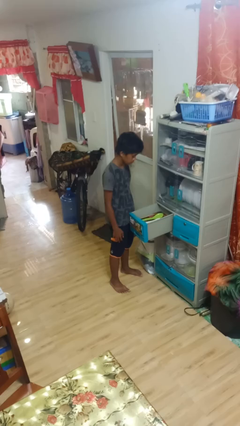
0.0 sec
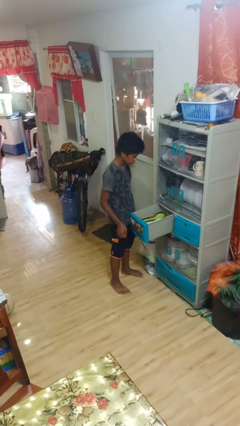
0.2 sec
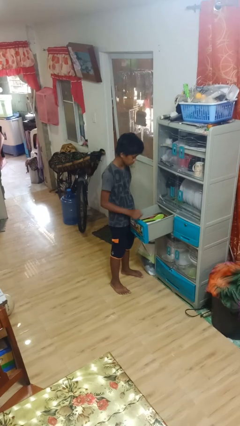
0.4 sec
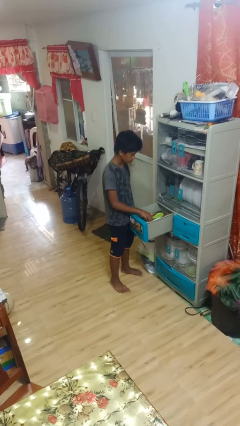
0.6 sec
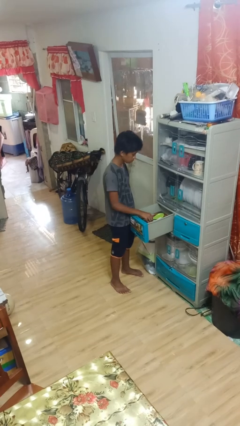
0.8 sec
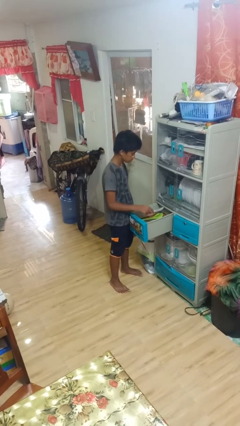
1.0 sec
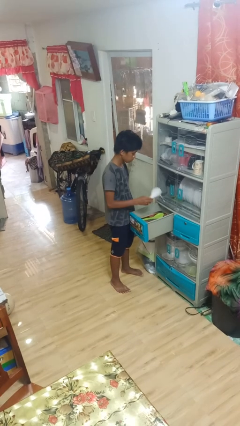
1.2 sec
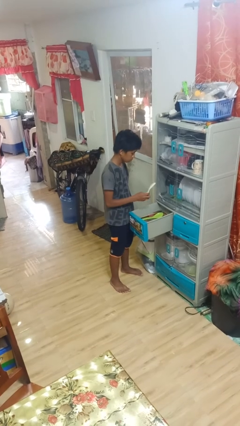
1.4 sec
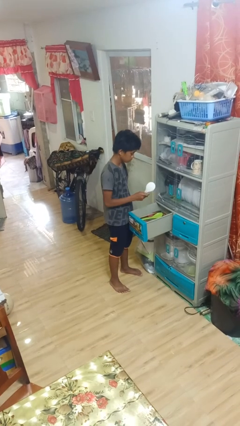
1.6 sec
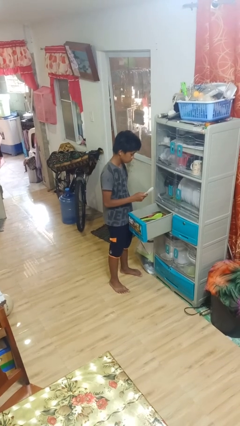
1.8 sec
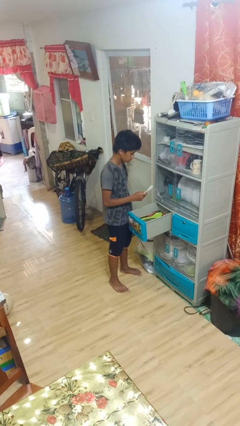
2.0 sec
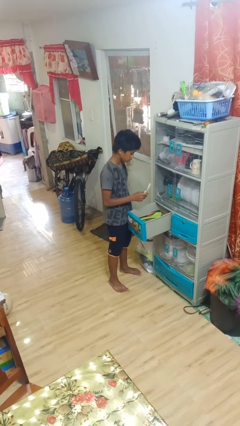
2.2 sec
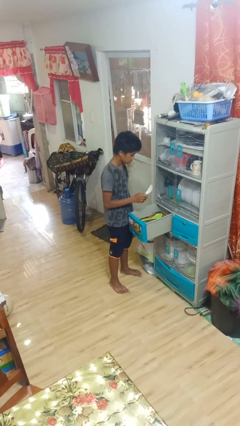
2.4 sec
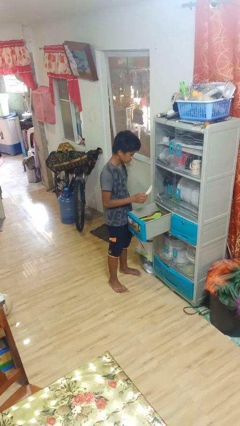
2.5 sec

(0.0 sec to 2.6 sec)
person takes object from kitchen drawer

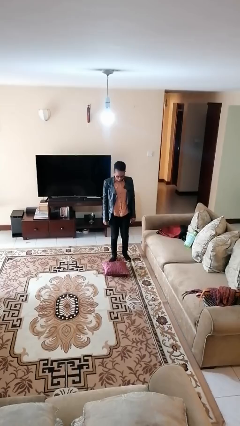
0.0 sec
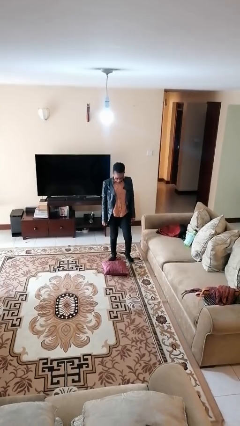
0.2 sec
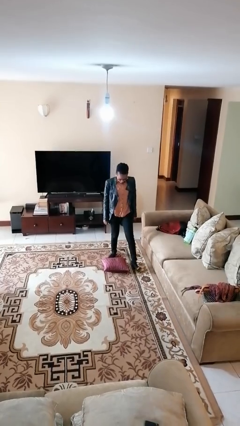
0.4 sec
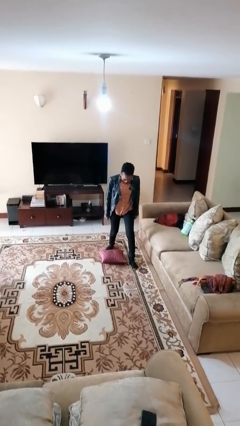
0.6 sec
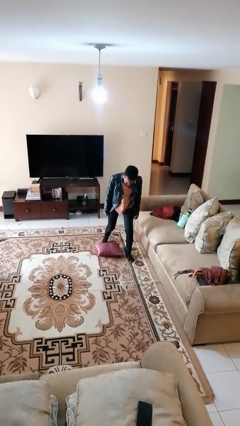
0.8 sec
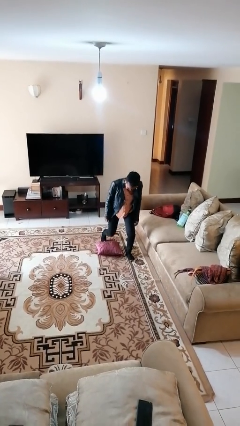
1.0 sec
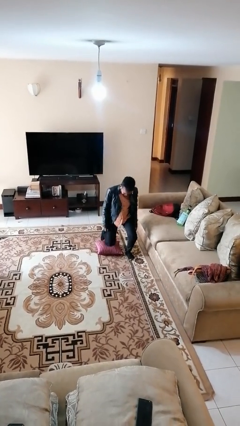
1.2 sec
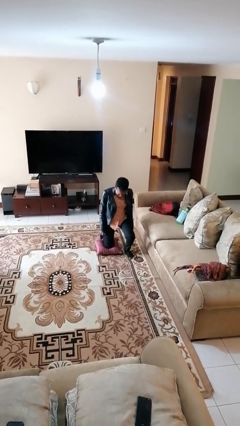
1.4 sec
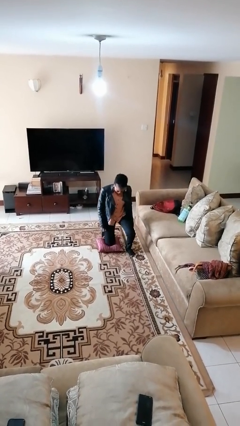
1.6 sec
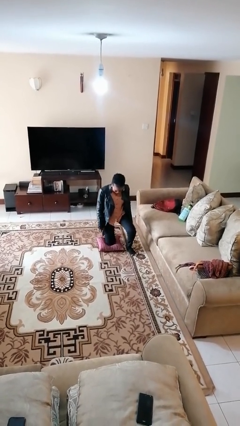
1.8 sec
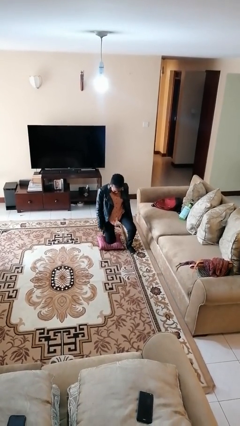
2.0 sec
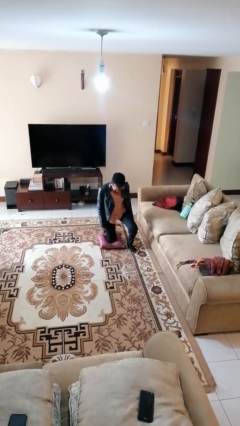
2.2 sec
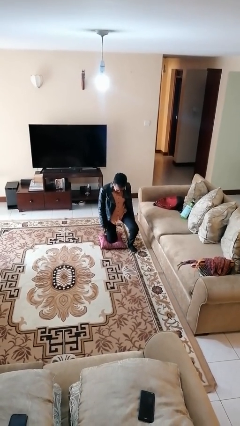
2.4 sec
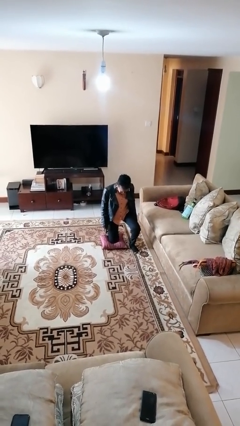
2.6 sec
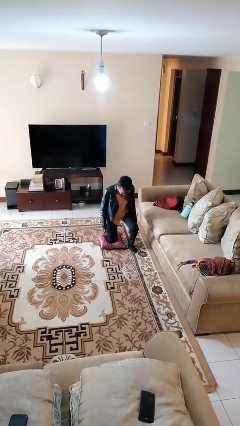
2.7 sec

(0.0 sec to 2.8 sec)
person kneels

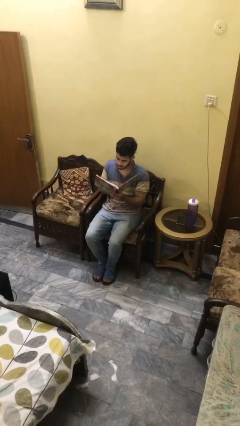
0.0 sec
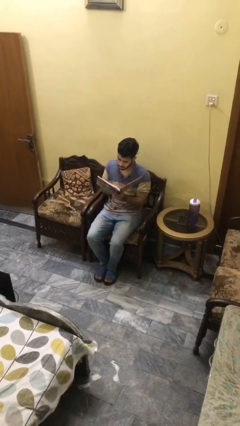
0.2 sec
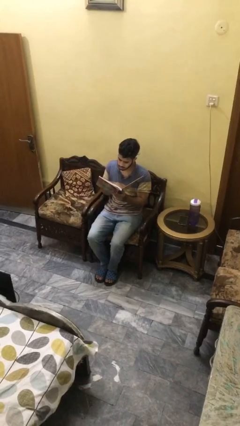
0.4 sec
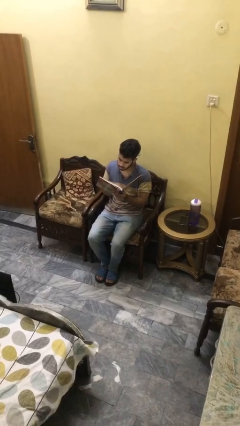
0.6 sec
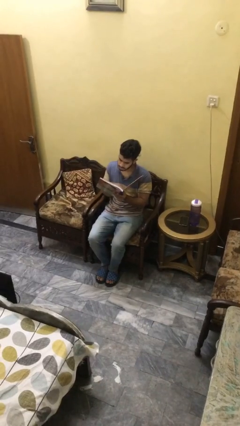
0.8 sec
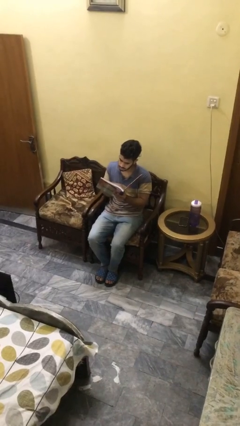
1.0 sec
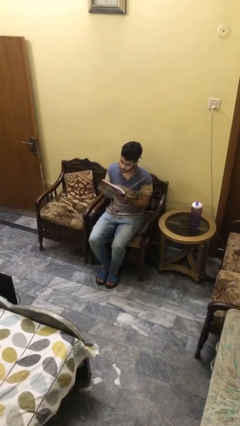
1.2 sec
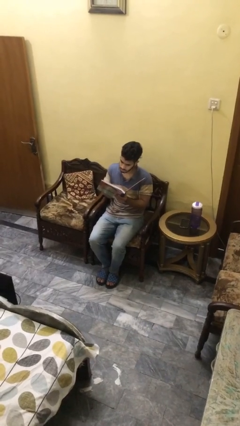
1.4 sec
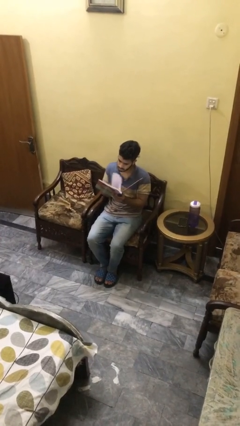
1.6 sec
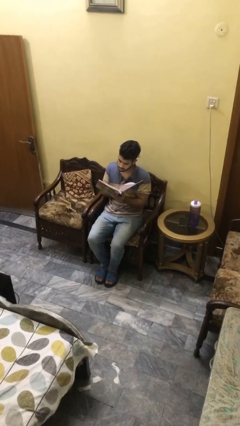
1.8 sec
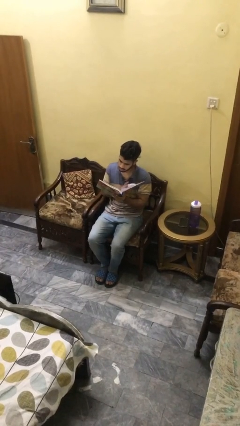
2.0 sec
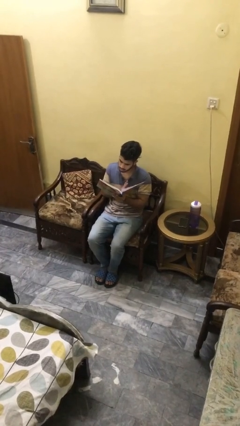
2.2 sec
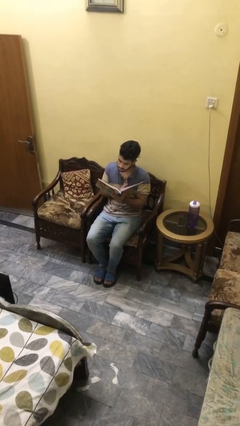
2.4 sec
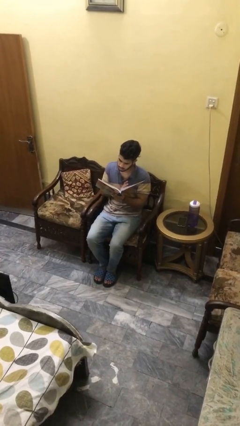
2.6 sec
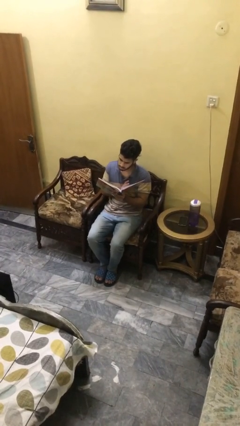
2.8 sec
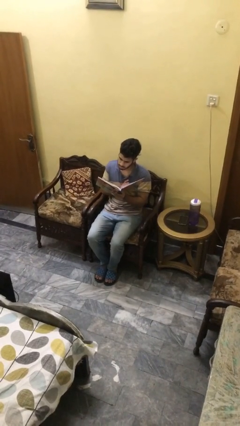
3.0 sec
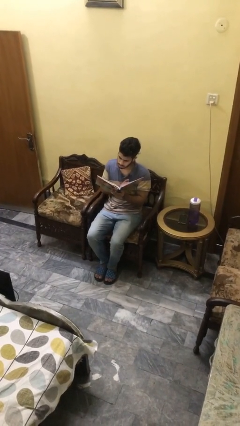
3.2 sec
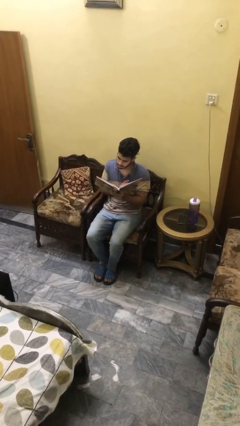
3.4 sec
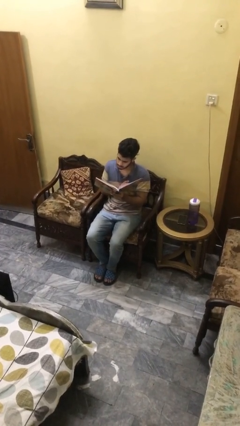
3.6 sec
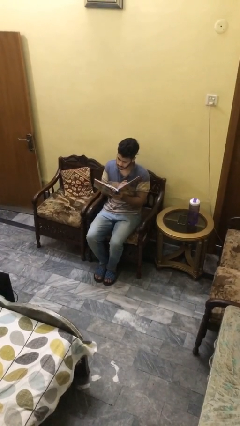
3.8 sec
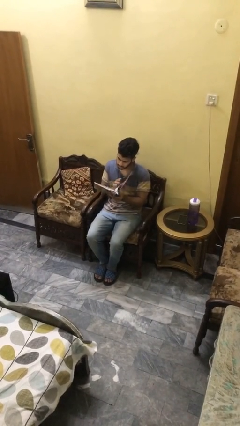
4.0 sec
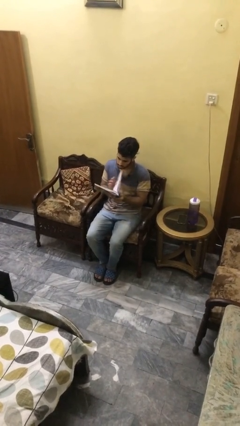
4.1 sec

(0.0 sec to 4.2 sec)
person reads document

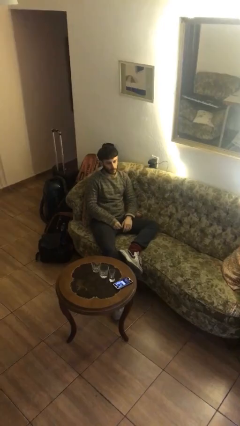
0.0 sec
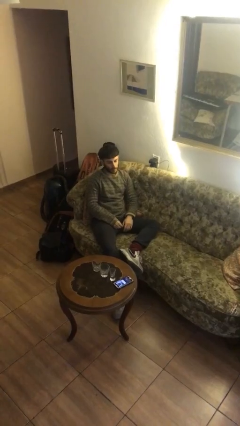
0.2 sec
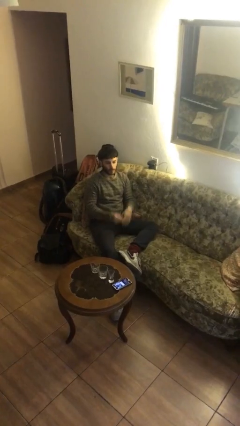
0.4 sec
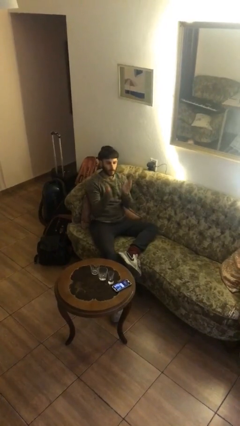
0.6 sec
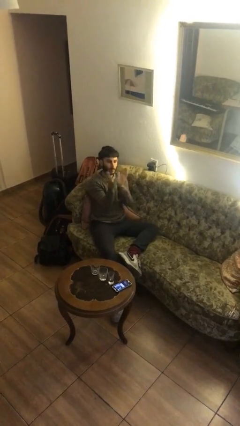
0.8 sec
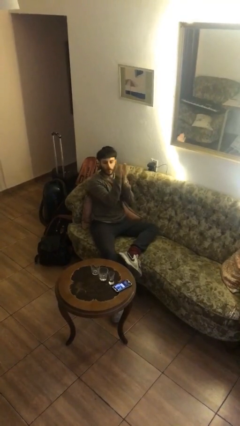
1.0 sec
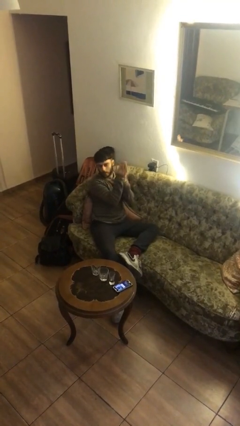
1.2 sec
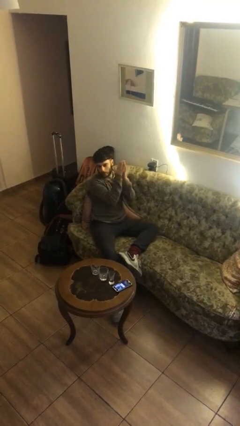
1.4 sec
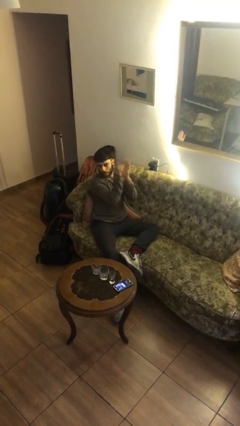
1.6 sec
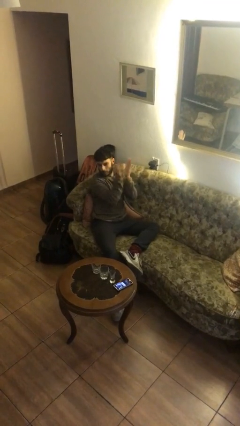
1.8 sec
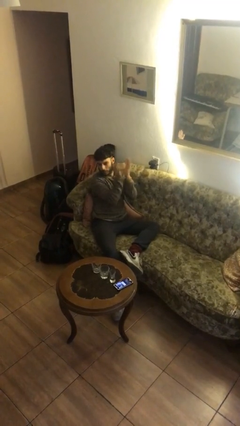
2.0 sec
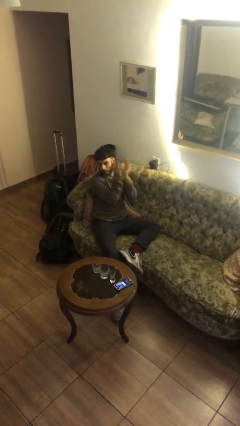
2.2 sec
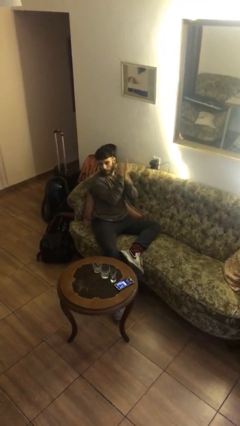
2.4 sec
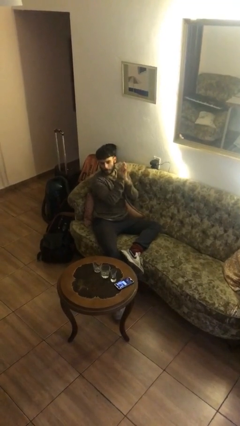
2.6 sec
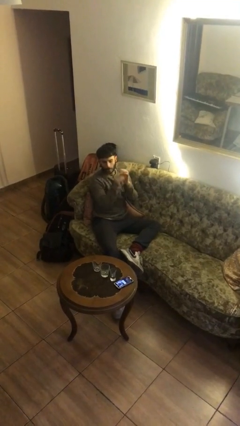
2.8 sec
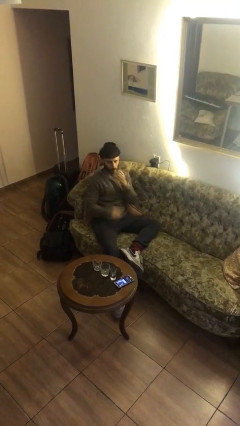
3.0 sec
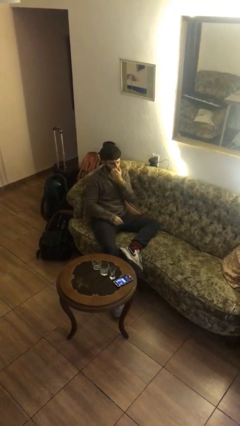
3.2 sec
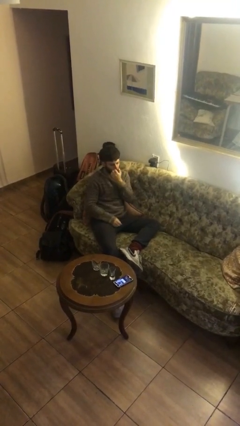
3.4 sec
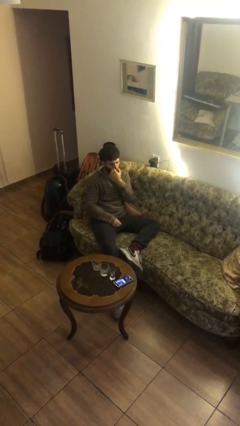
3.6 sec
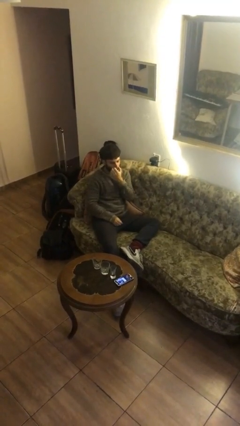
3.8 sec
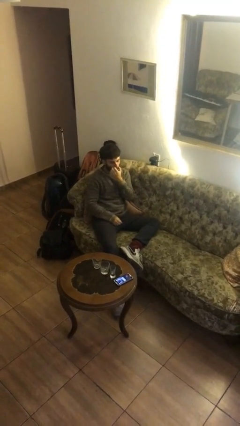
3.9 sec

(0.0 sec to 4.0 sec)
person claps hands

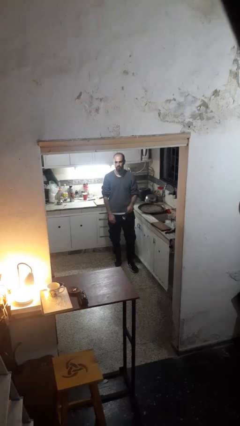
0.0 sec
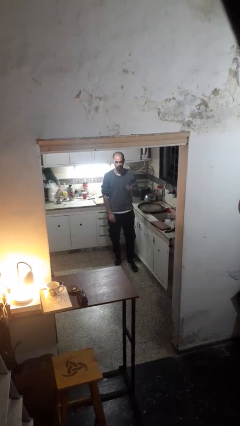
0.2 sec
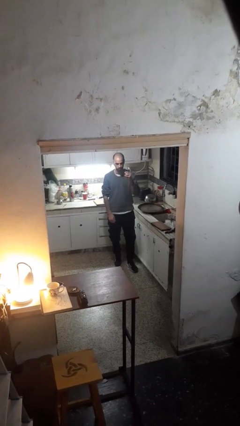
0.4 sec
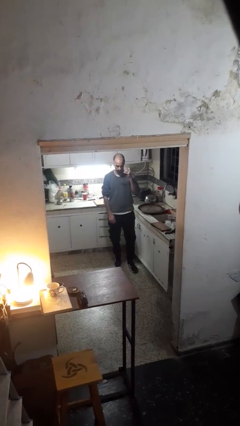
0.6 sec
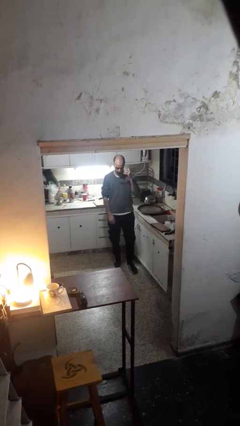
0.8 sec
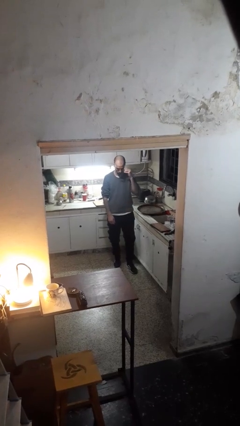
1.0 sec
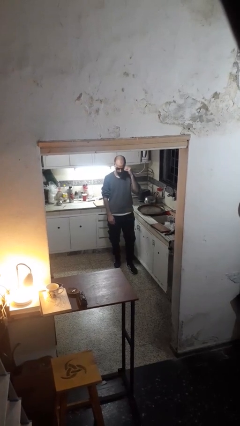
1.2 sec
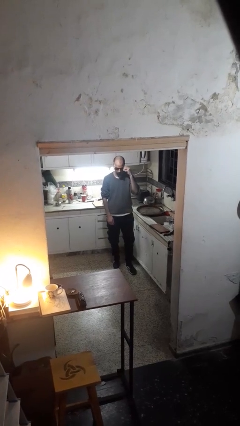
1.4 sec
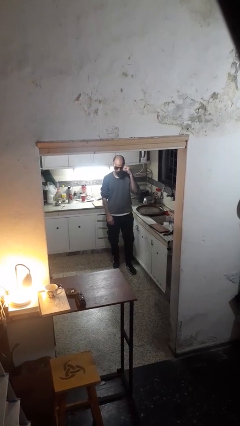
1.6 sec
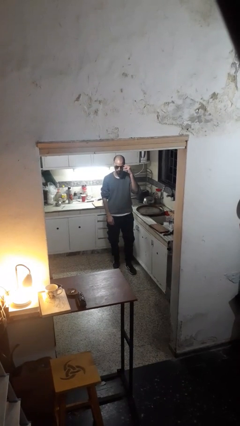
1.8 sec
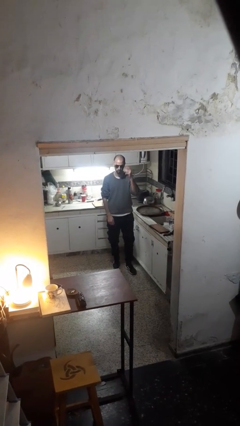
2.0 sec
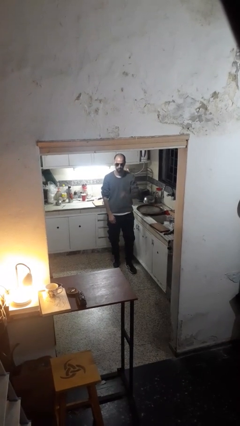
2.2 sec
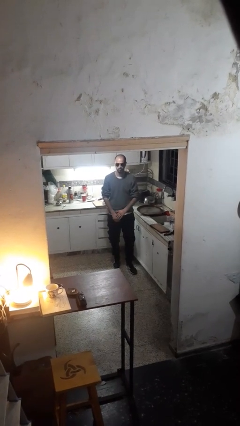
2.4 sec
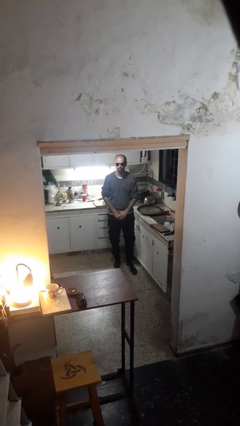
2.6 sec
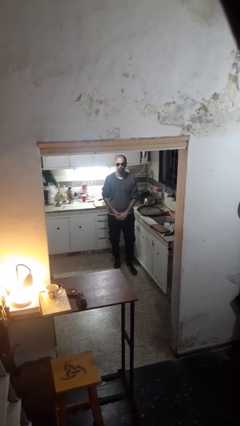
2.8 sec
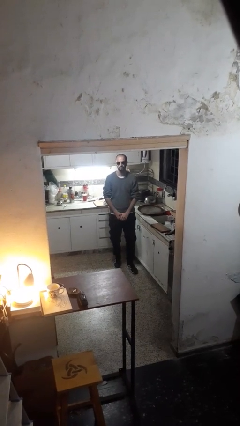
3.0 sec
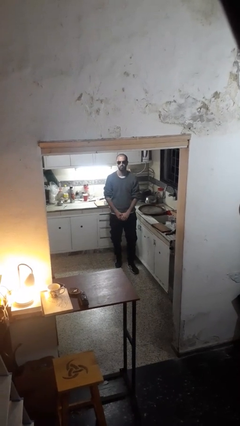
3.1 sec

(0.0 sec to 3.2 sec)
person puts on sunglasses

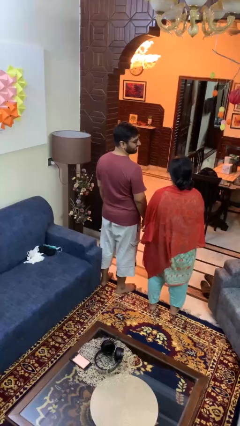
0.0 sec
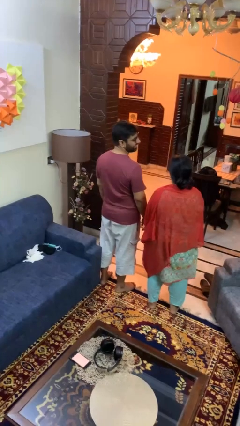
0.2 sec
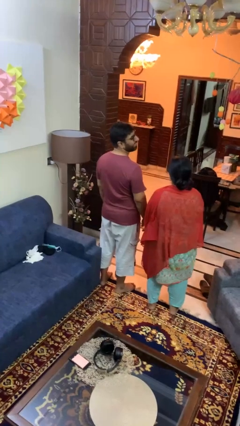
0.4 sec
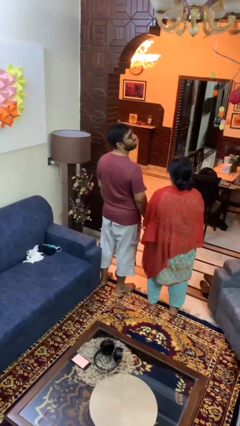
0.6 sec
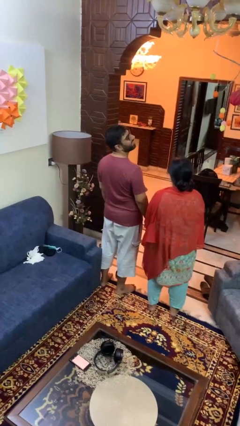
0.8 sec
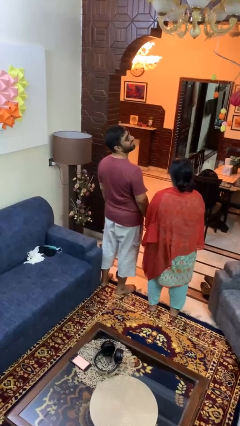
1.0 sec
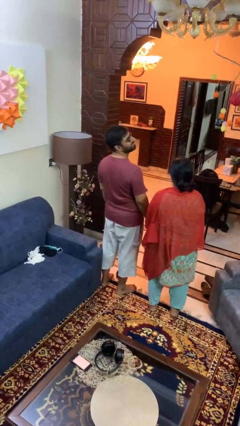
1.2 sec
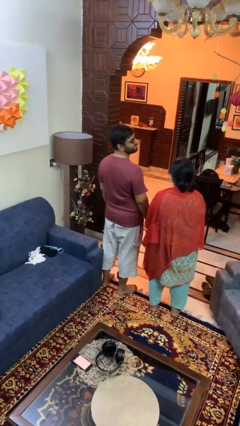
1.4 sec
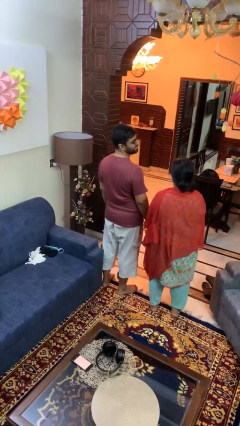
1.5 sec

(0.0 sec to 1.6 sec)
person laughs with person
